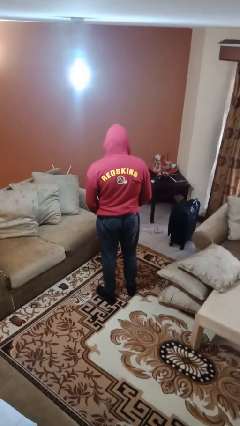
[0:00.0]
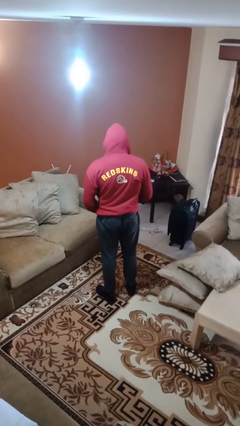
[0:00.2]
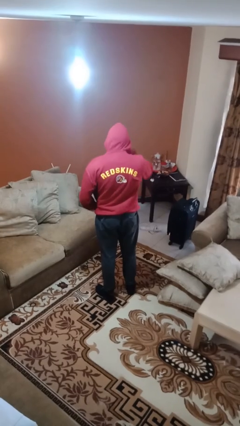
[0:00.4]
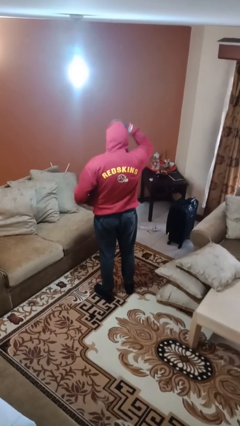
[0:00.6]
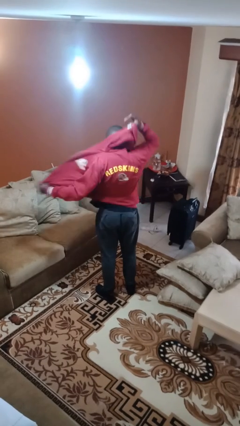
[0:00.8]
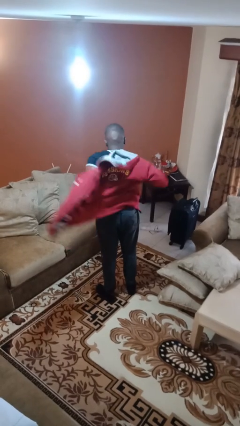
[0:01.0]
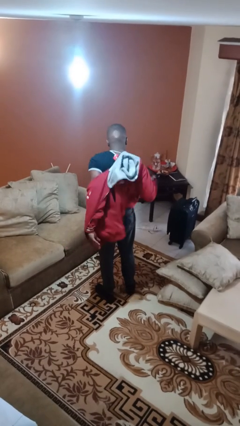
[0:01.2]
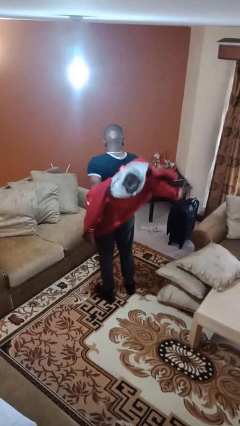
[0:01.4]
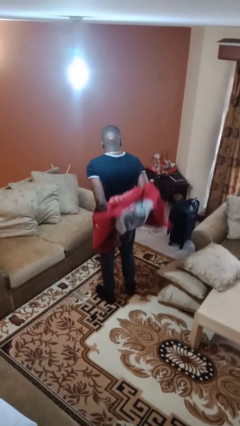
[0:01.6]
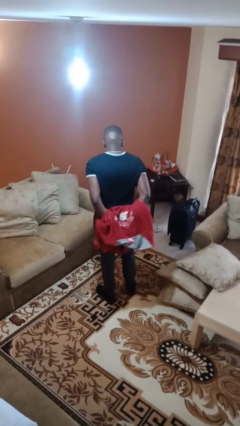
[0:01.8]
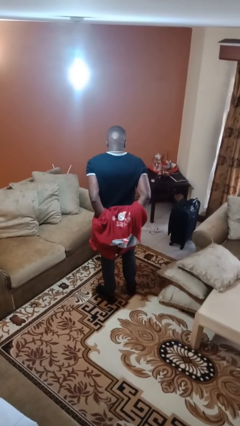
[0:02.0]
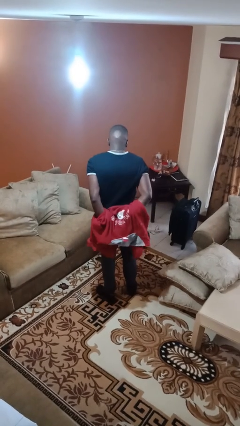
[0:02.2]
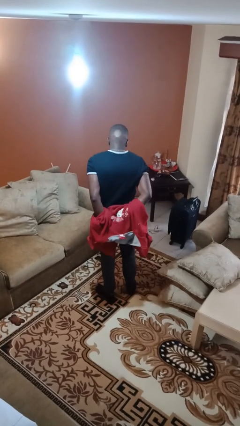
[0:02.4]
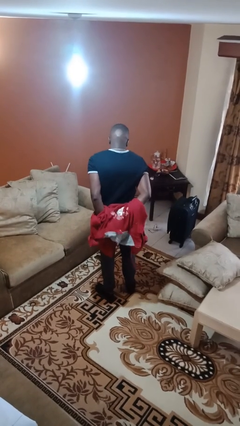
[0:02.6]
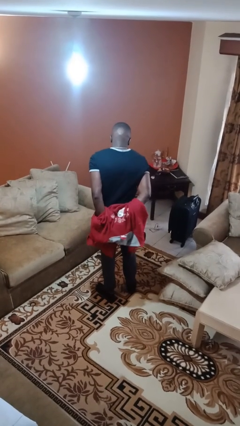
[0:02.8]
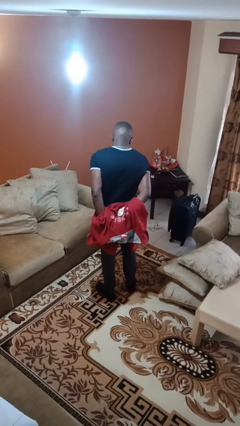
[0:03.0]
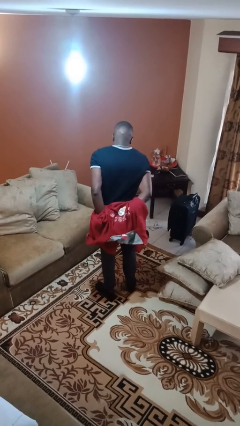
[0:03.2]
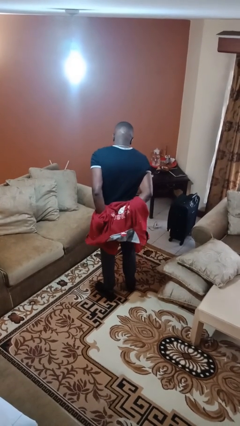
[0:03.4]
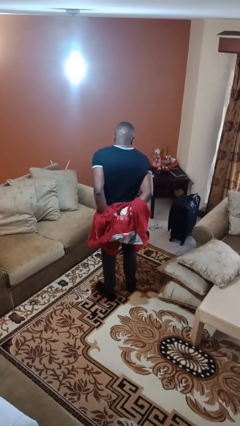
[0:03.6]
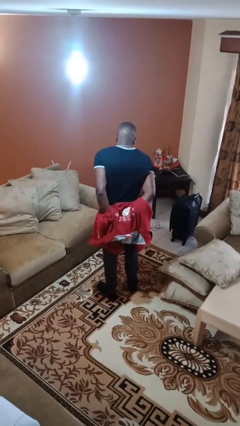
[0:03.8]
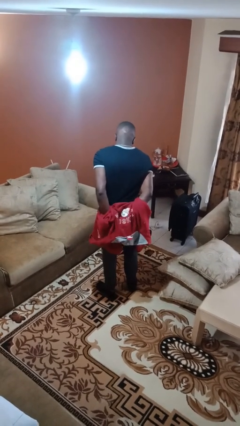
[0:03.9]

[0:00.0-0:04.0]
person takes off hoodie

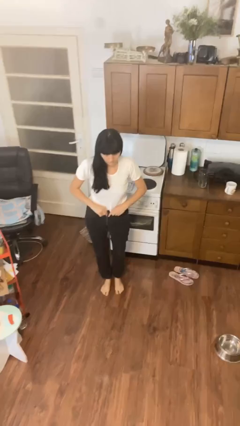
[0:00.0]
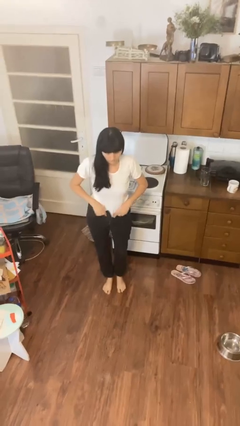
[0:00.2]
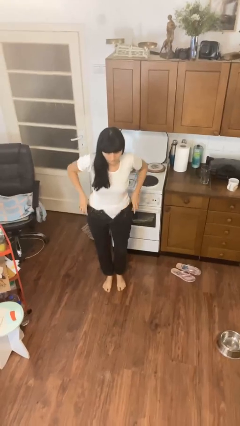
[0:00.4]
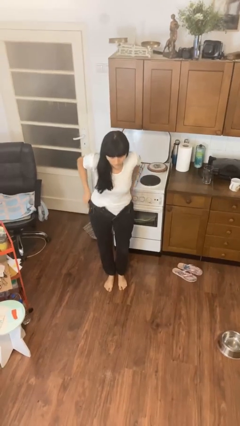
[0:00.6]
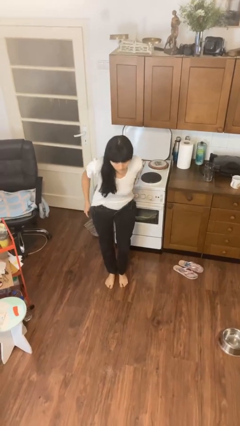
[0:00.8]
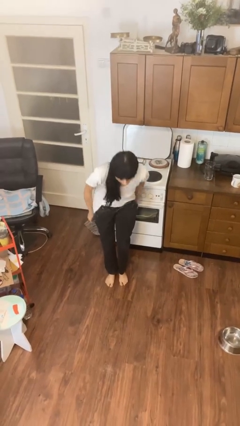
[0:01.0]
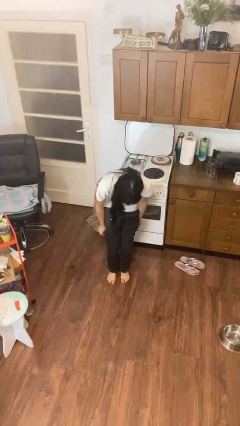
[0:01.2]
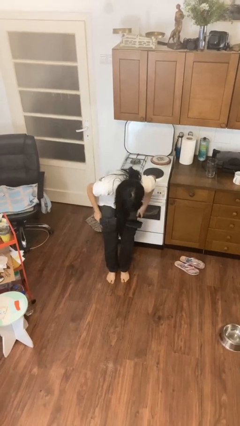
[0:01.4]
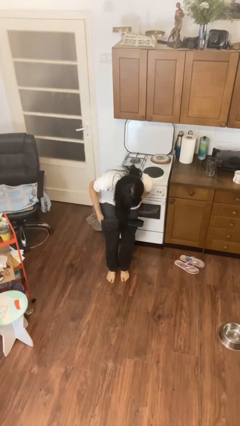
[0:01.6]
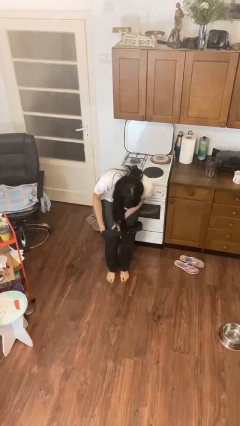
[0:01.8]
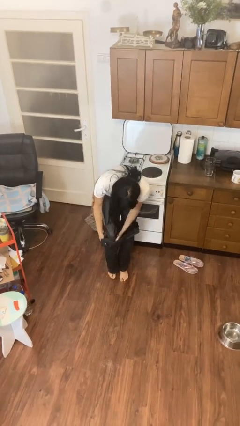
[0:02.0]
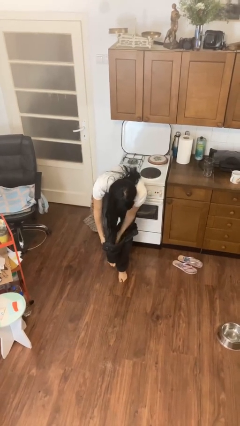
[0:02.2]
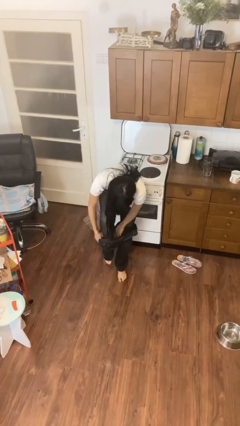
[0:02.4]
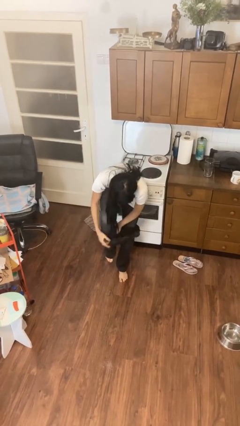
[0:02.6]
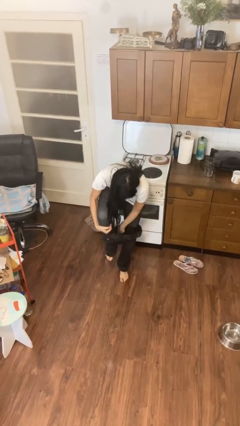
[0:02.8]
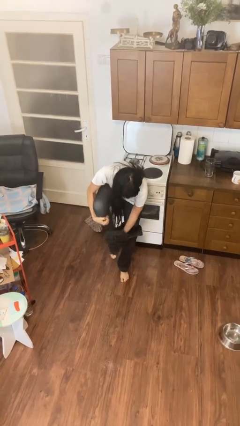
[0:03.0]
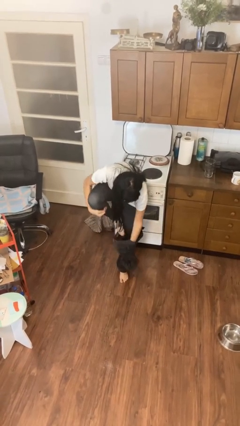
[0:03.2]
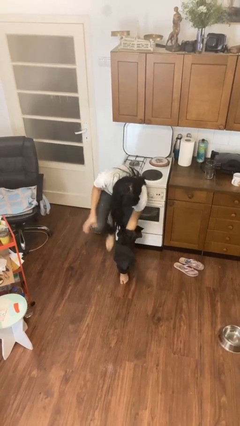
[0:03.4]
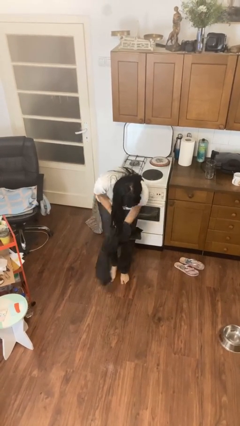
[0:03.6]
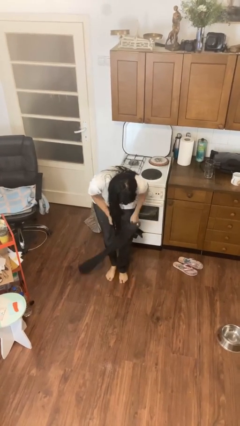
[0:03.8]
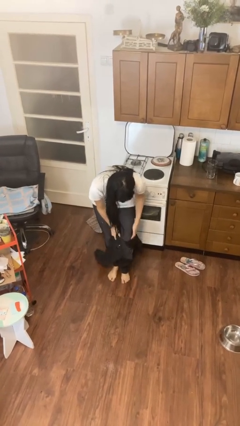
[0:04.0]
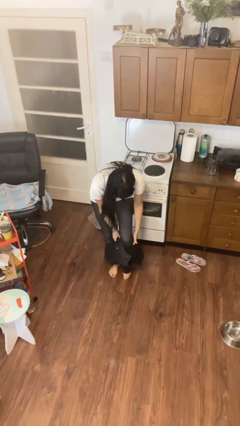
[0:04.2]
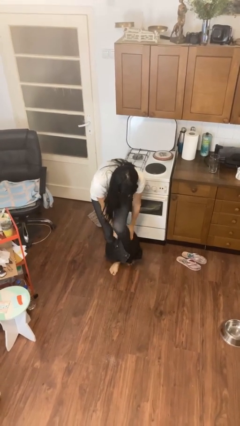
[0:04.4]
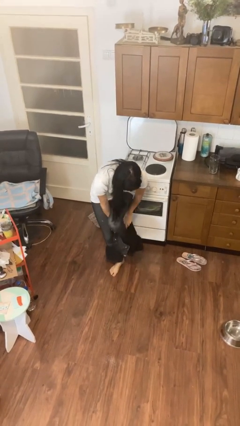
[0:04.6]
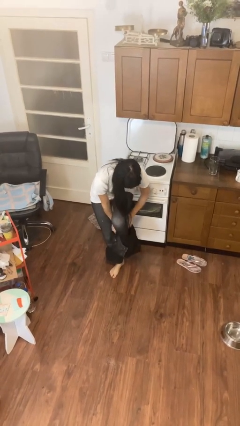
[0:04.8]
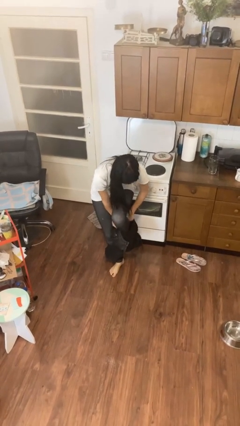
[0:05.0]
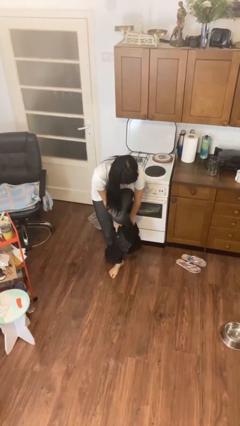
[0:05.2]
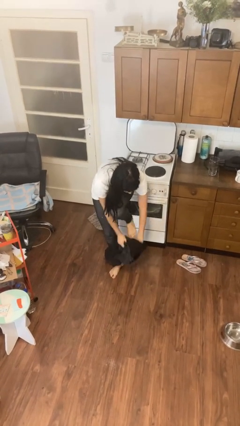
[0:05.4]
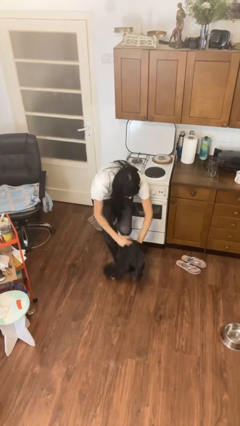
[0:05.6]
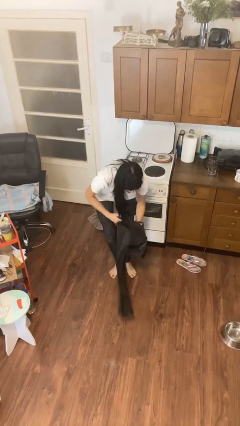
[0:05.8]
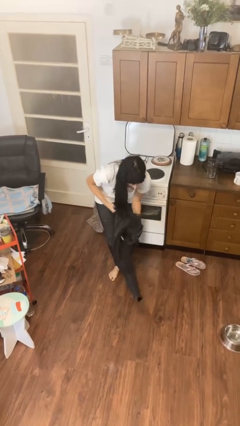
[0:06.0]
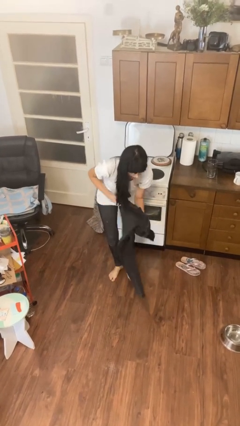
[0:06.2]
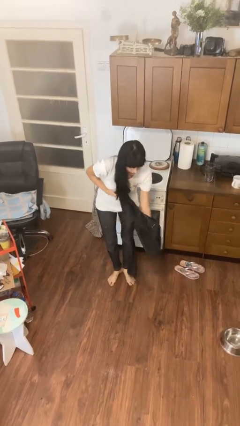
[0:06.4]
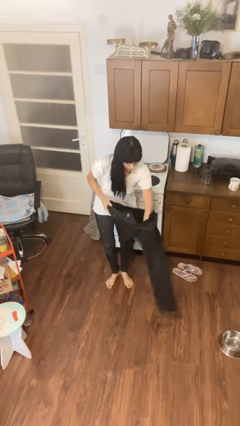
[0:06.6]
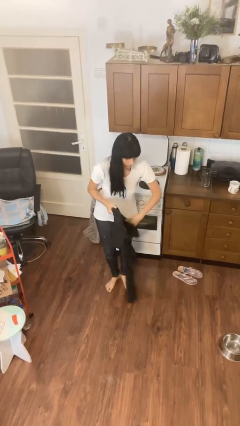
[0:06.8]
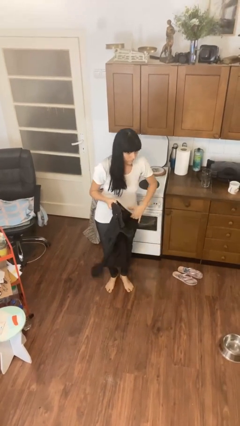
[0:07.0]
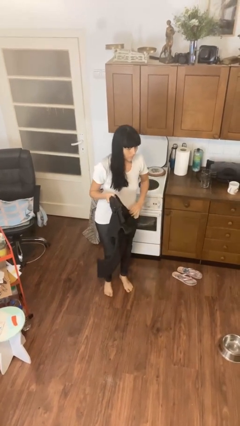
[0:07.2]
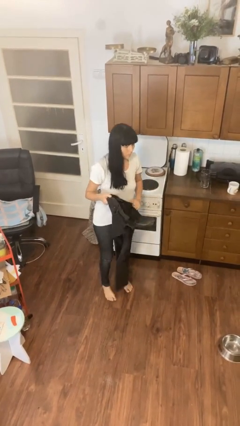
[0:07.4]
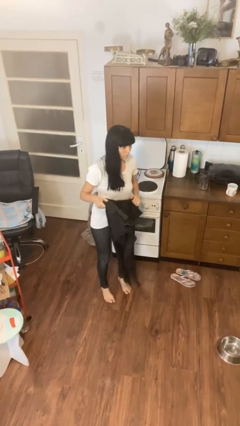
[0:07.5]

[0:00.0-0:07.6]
person takes off pants

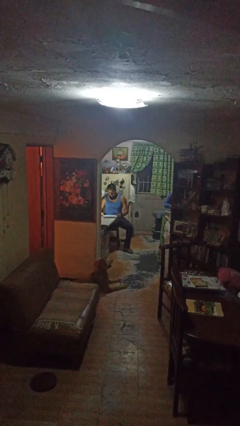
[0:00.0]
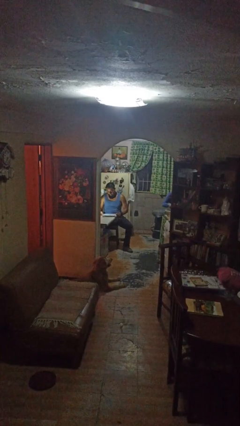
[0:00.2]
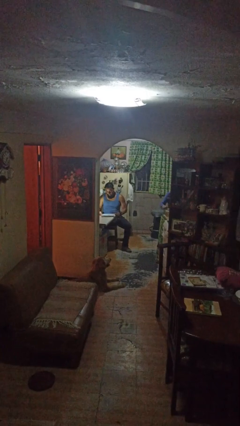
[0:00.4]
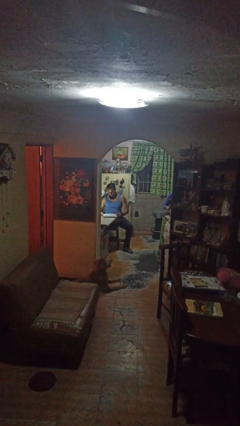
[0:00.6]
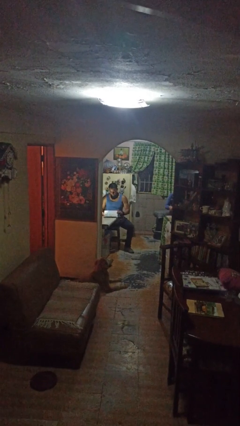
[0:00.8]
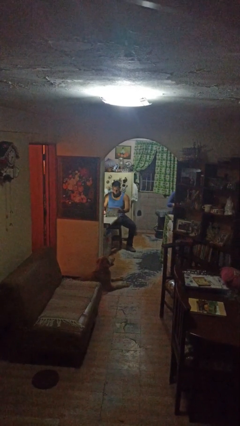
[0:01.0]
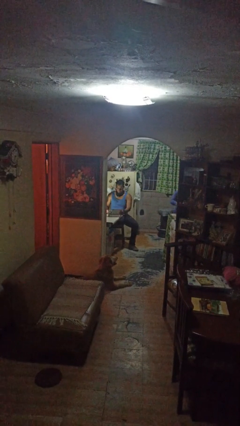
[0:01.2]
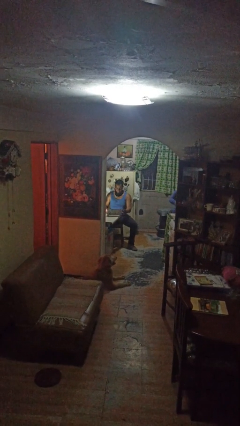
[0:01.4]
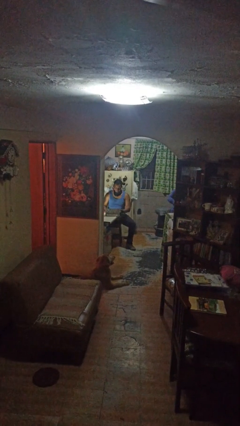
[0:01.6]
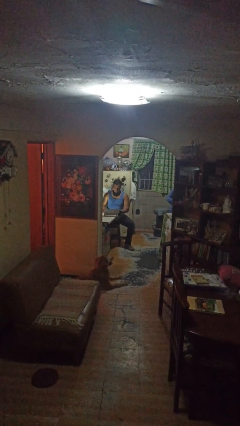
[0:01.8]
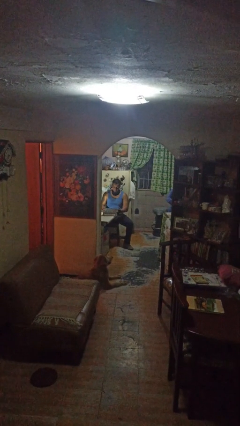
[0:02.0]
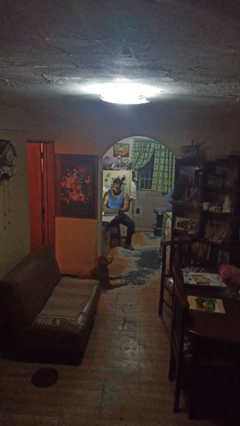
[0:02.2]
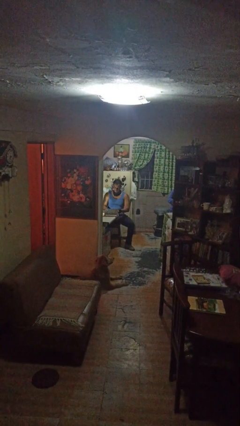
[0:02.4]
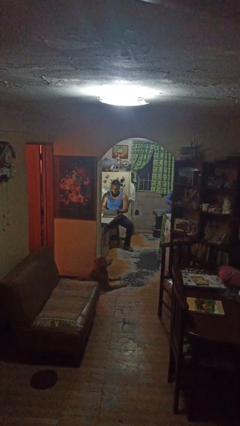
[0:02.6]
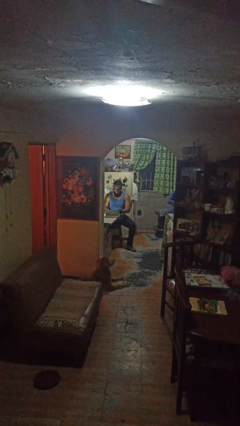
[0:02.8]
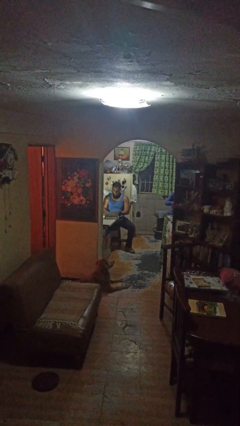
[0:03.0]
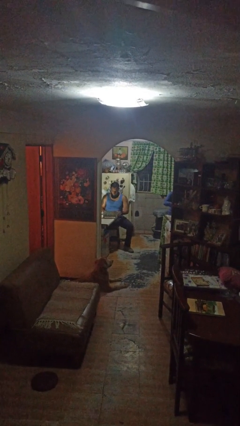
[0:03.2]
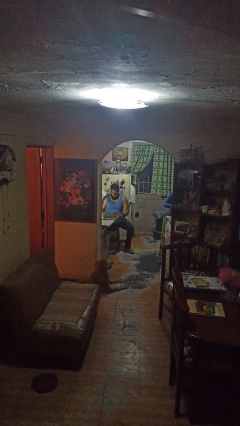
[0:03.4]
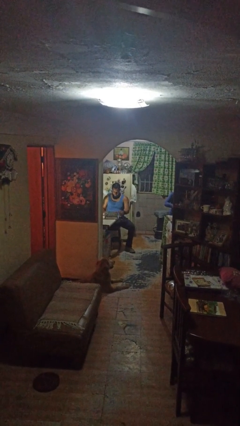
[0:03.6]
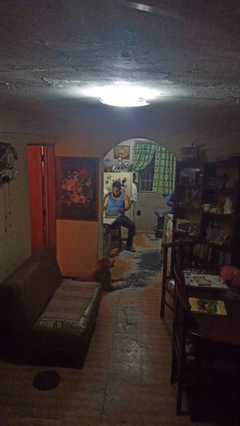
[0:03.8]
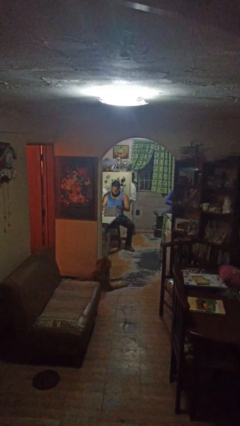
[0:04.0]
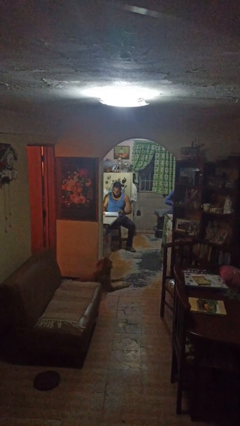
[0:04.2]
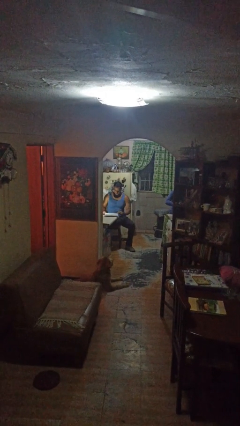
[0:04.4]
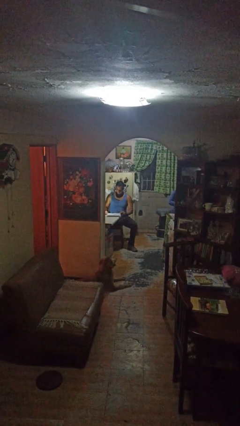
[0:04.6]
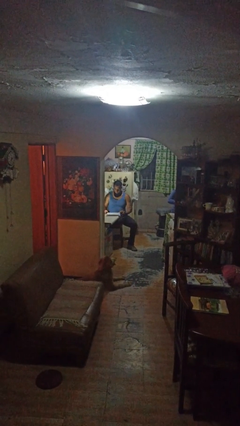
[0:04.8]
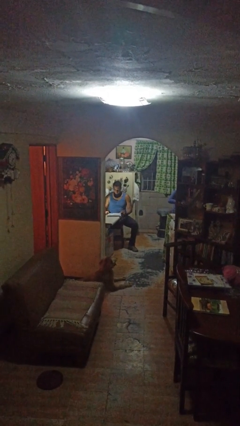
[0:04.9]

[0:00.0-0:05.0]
person interacts with laptop

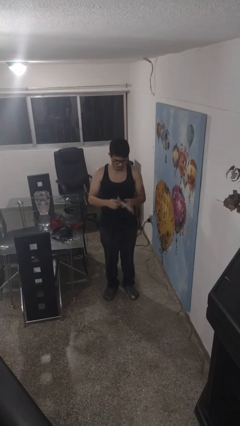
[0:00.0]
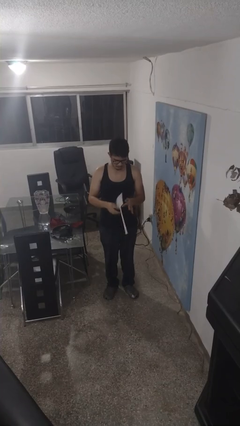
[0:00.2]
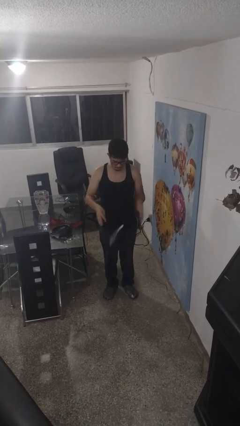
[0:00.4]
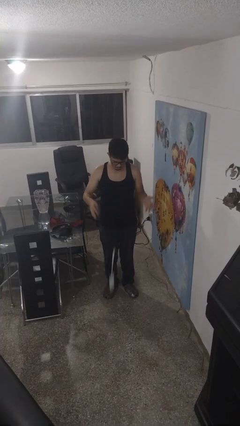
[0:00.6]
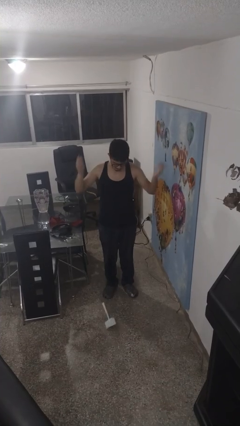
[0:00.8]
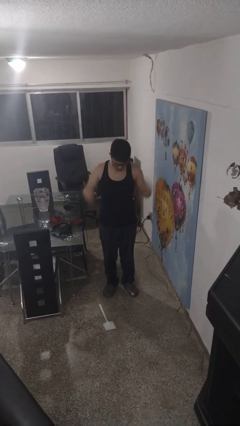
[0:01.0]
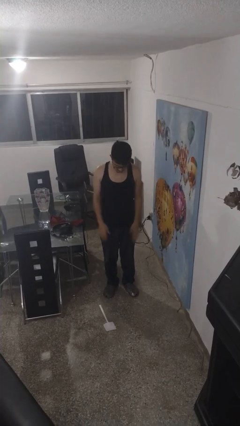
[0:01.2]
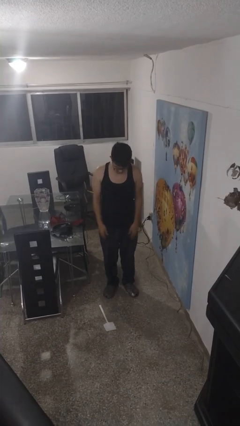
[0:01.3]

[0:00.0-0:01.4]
person drops object
